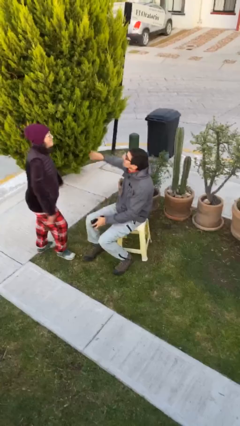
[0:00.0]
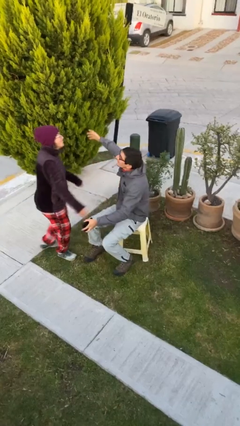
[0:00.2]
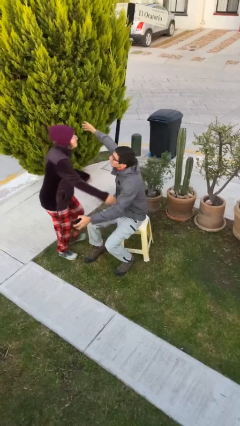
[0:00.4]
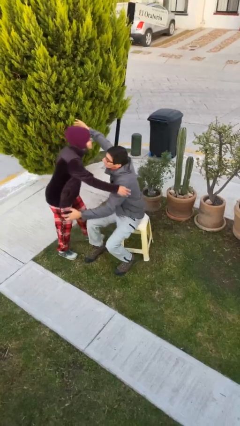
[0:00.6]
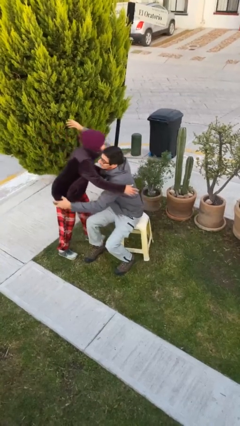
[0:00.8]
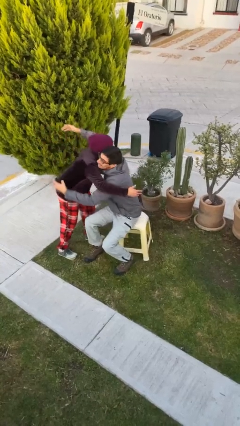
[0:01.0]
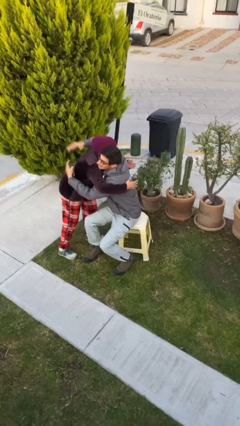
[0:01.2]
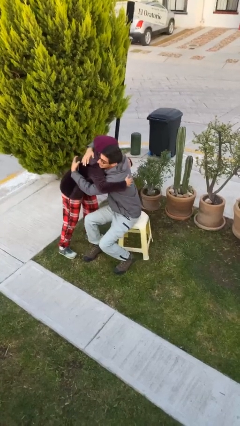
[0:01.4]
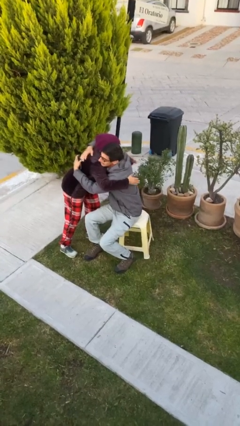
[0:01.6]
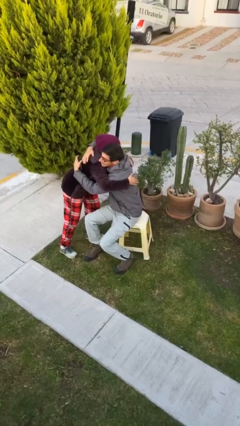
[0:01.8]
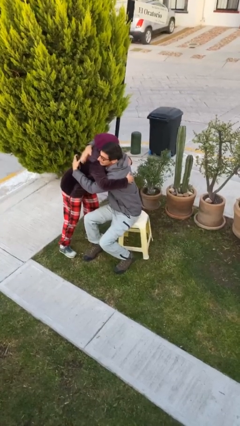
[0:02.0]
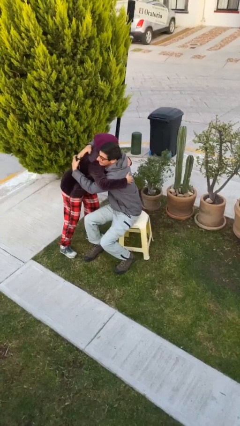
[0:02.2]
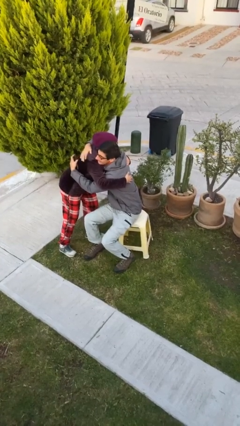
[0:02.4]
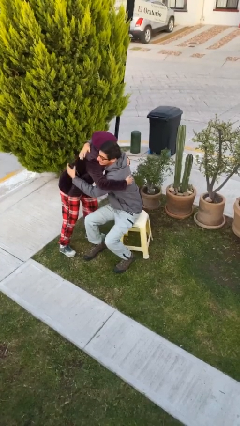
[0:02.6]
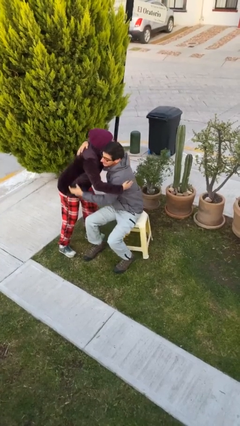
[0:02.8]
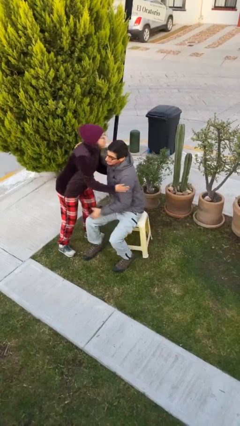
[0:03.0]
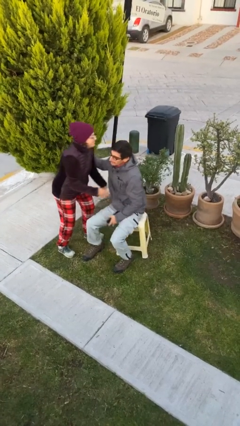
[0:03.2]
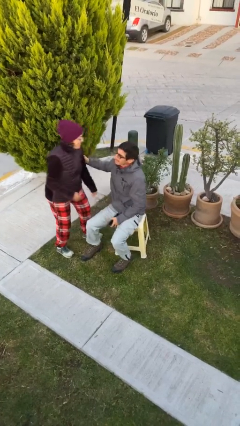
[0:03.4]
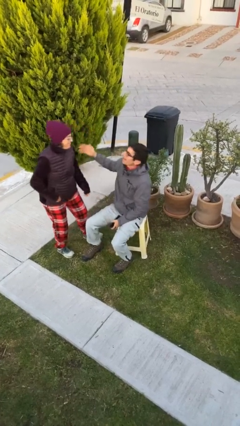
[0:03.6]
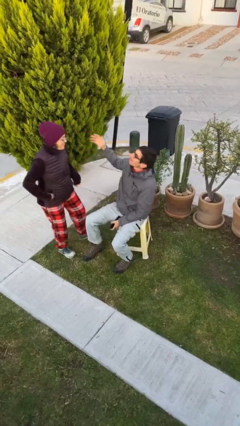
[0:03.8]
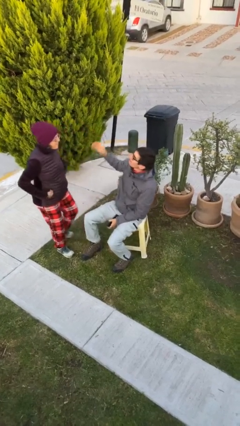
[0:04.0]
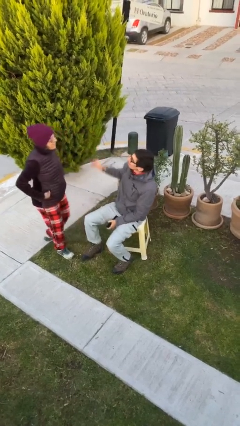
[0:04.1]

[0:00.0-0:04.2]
person embraces person

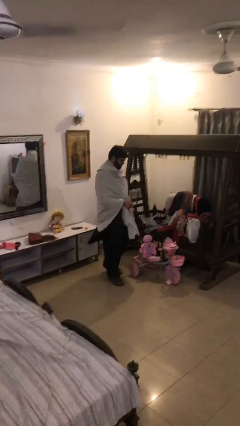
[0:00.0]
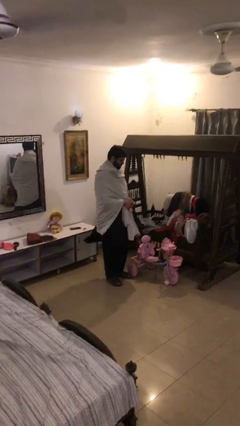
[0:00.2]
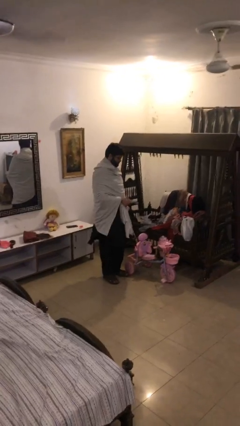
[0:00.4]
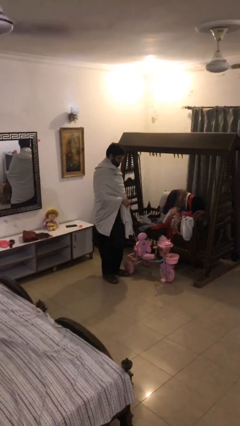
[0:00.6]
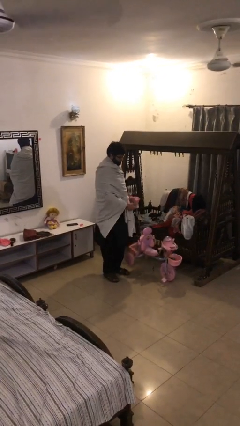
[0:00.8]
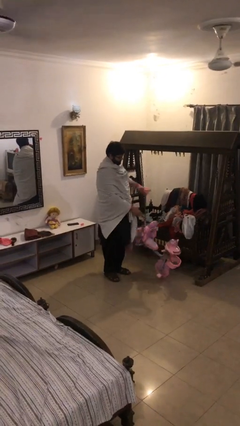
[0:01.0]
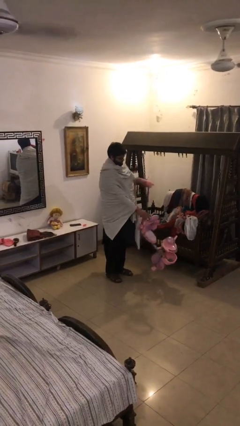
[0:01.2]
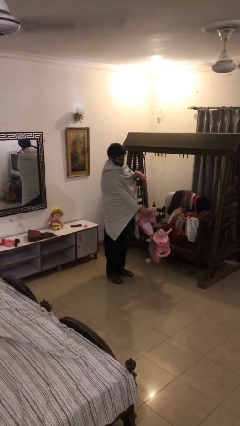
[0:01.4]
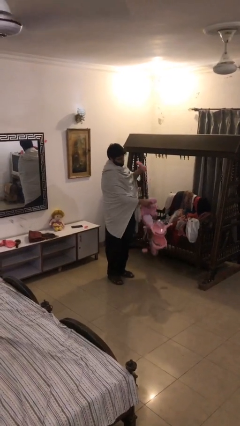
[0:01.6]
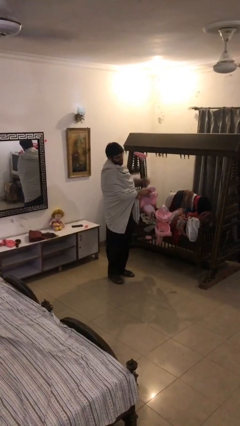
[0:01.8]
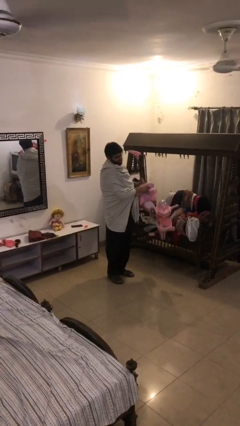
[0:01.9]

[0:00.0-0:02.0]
person picks up object from floor

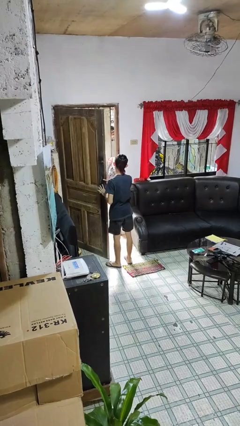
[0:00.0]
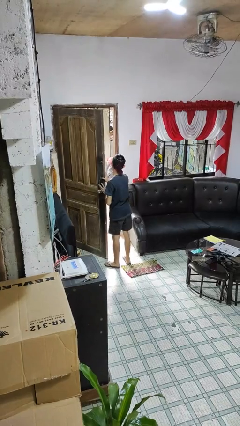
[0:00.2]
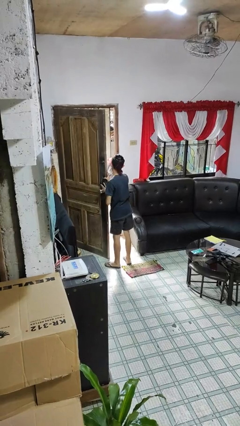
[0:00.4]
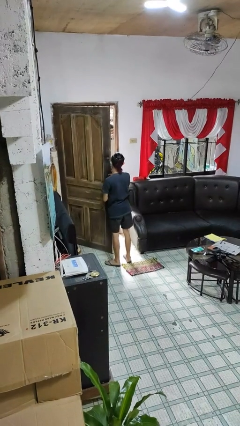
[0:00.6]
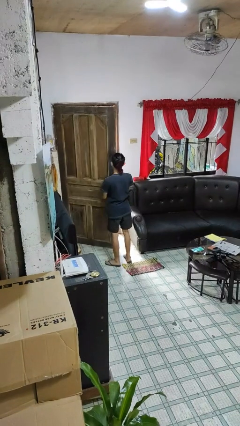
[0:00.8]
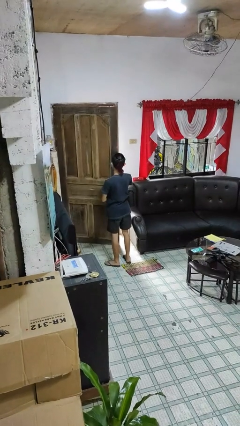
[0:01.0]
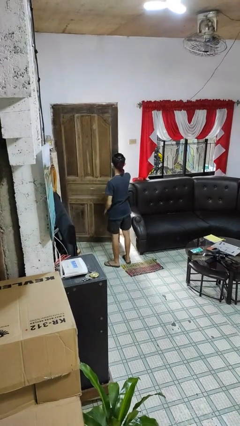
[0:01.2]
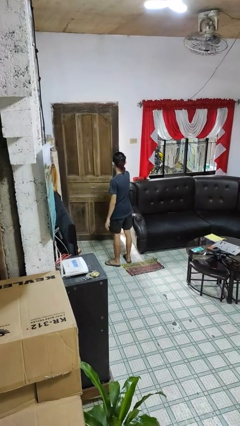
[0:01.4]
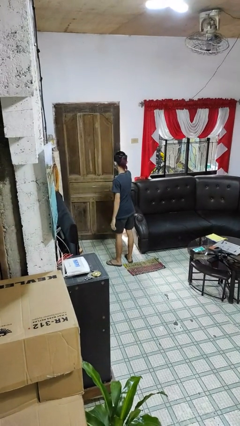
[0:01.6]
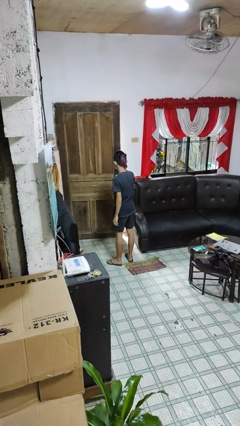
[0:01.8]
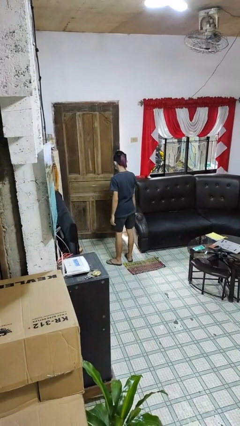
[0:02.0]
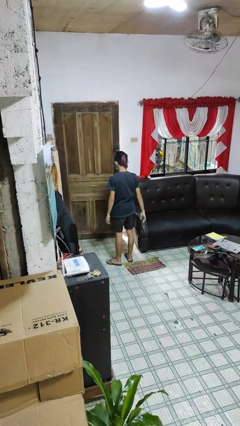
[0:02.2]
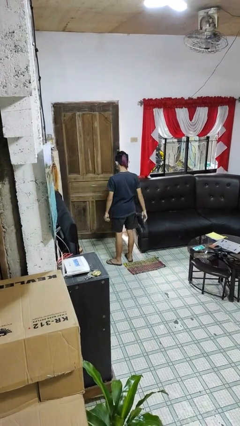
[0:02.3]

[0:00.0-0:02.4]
person closes facility door

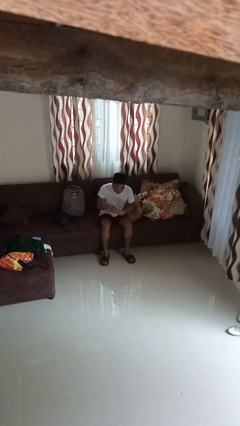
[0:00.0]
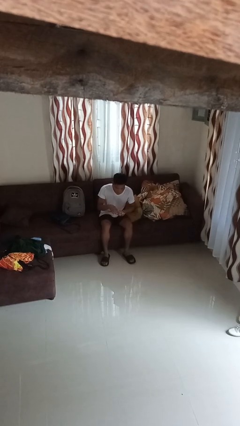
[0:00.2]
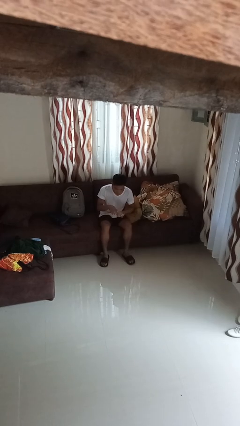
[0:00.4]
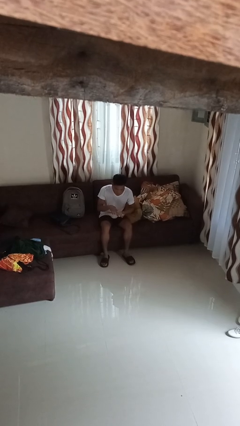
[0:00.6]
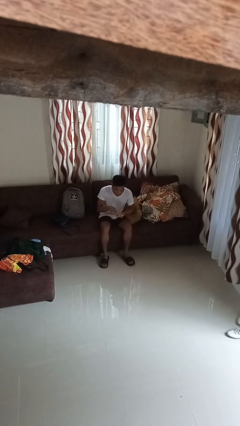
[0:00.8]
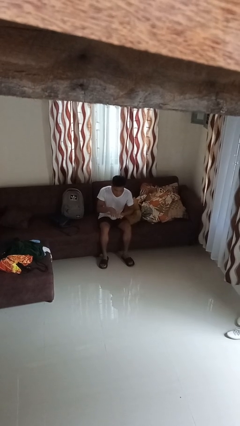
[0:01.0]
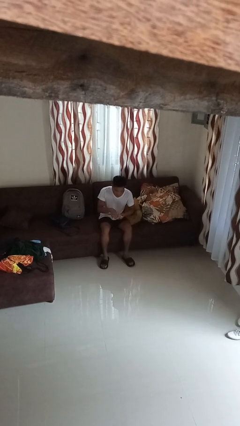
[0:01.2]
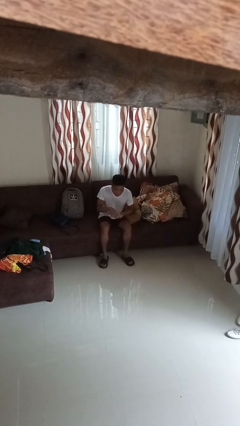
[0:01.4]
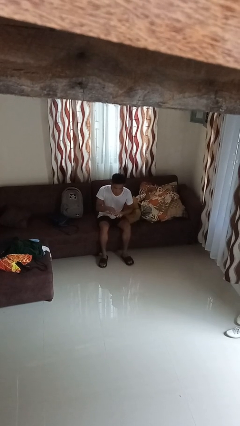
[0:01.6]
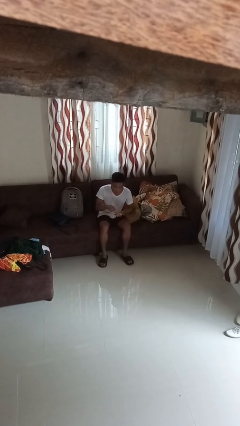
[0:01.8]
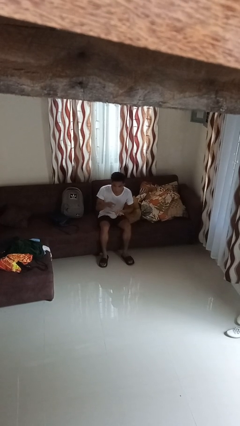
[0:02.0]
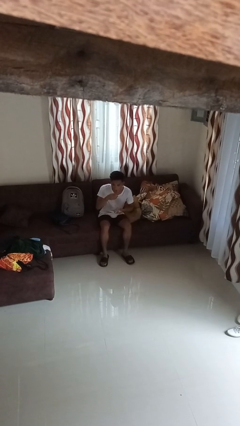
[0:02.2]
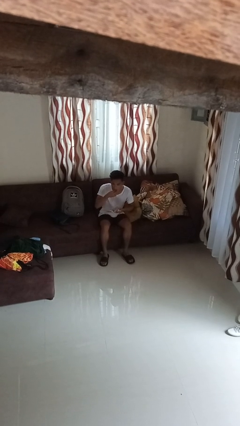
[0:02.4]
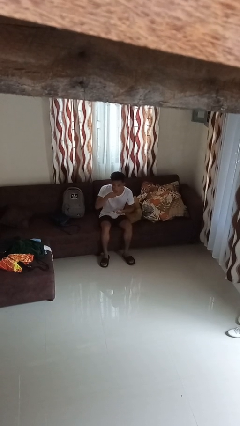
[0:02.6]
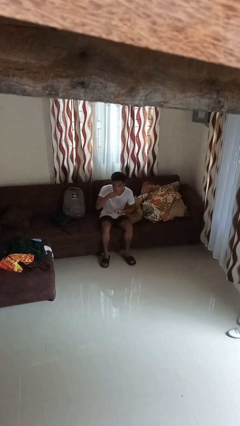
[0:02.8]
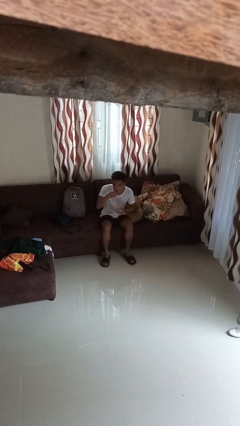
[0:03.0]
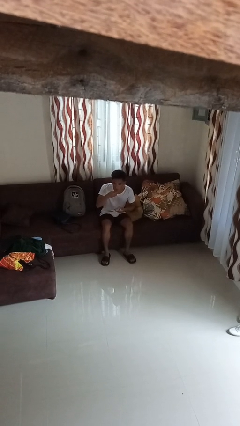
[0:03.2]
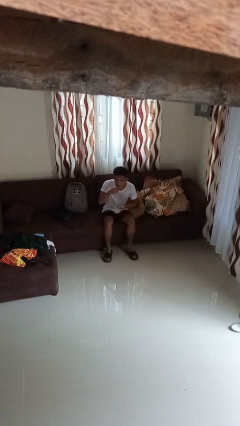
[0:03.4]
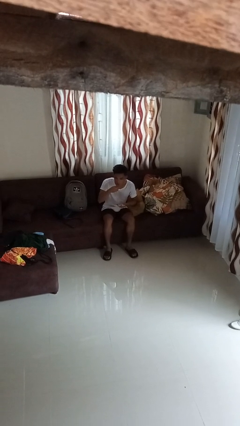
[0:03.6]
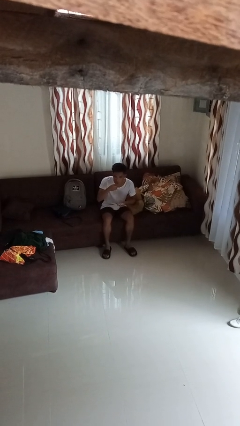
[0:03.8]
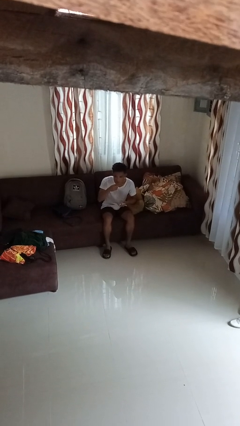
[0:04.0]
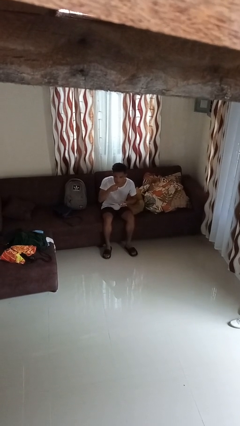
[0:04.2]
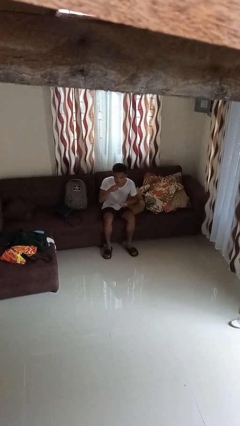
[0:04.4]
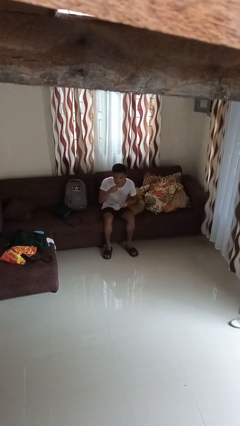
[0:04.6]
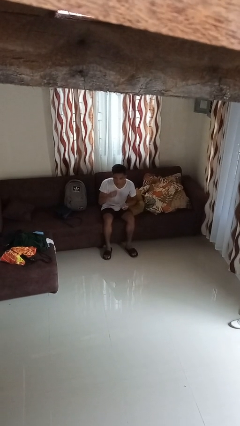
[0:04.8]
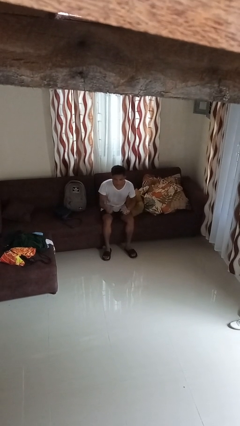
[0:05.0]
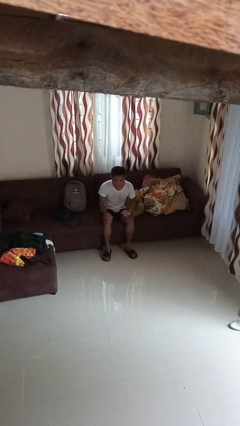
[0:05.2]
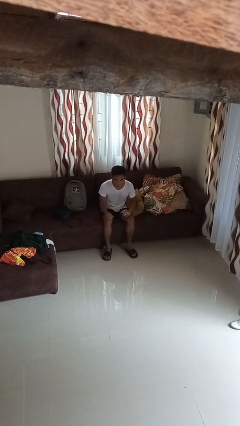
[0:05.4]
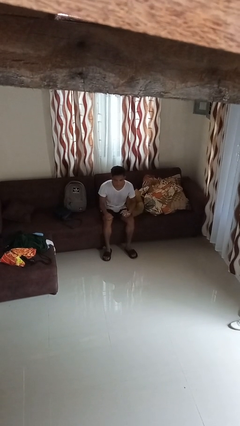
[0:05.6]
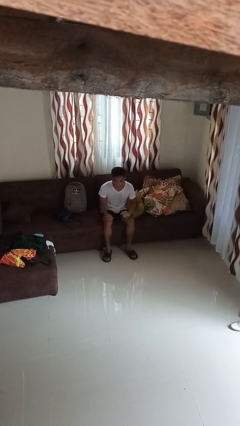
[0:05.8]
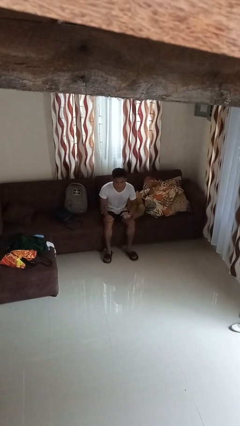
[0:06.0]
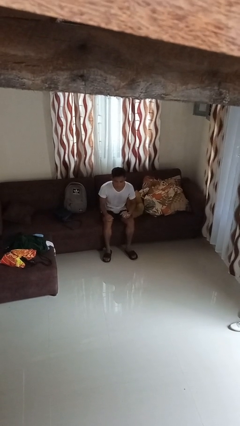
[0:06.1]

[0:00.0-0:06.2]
person eats snack from bag

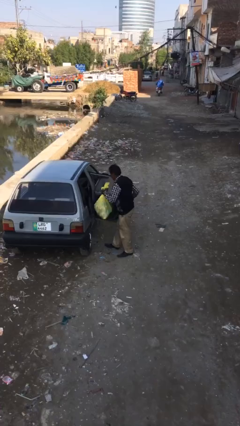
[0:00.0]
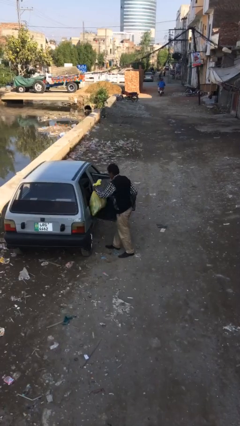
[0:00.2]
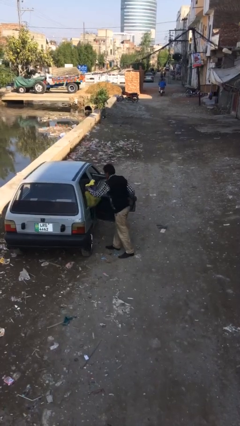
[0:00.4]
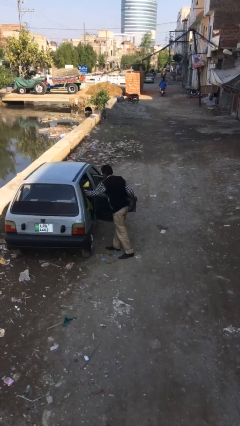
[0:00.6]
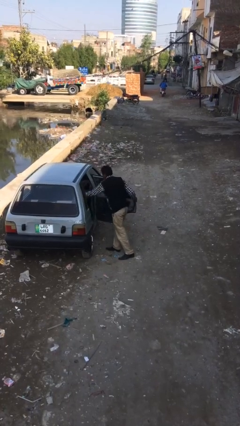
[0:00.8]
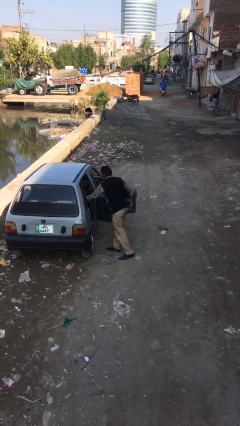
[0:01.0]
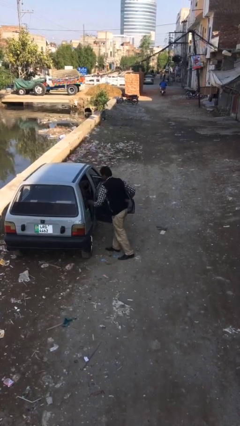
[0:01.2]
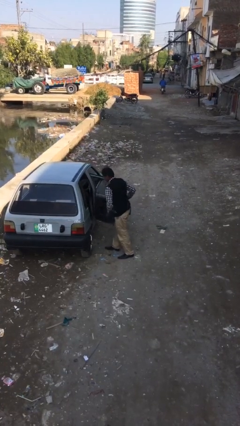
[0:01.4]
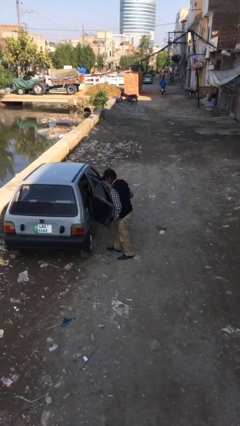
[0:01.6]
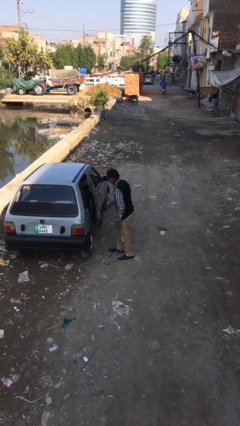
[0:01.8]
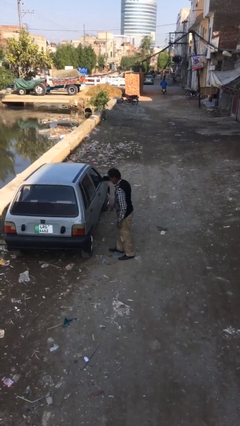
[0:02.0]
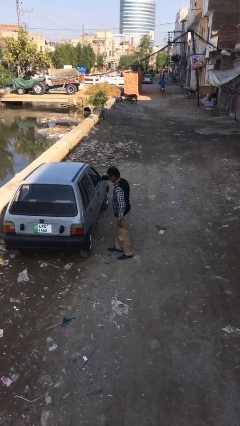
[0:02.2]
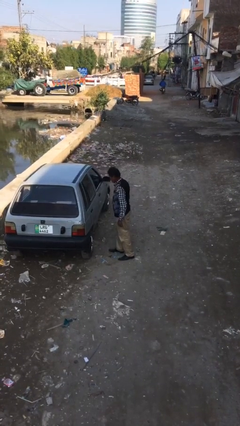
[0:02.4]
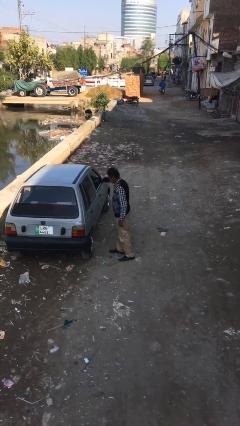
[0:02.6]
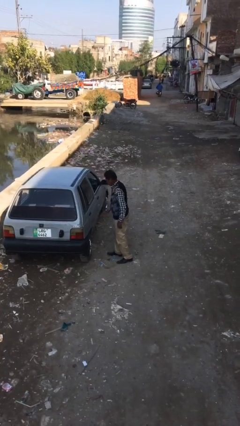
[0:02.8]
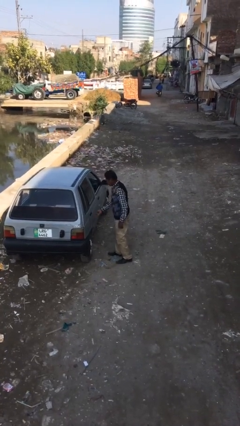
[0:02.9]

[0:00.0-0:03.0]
person loads car
